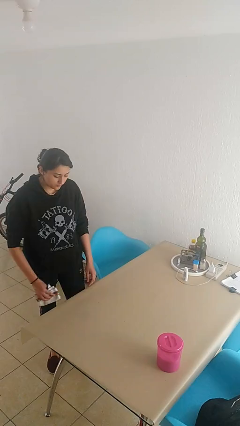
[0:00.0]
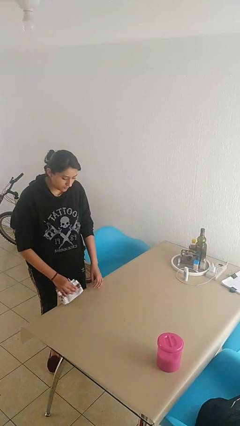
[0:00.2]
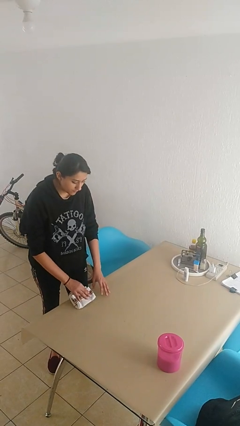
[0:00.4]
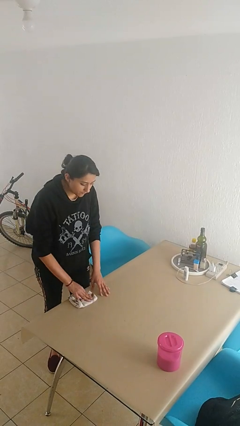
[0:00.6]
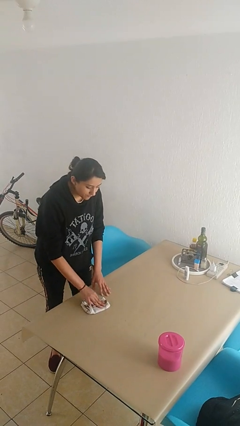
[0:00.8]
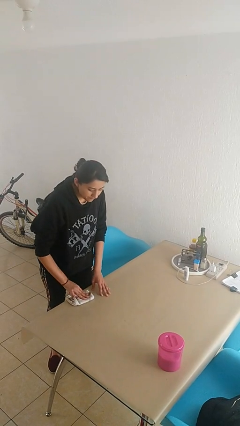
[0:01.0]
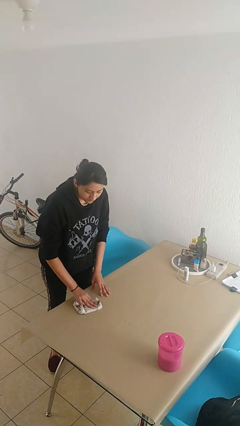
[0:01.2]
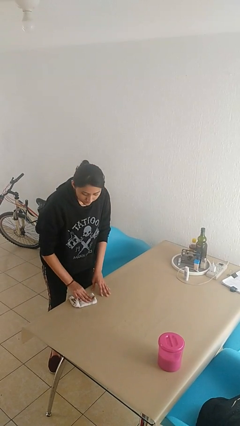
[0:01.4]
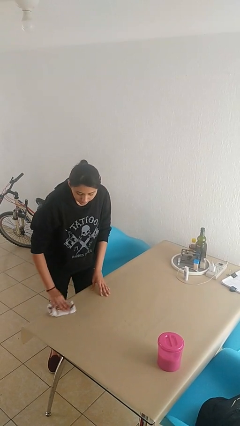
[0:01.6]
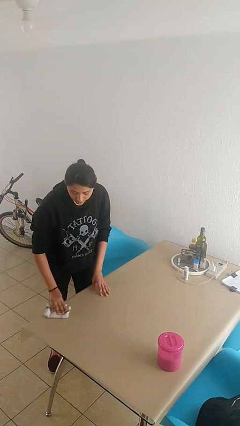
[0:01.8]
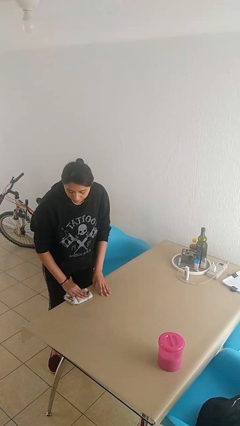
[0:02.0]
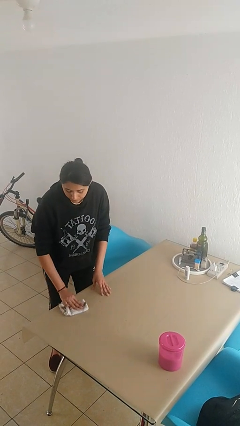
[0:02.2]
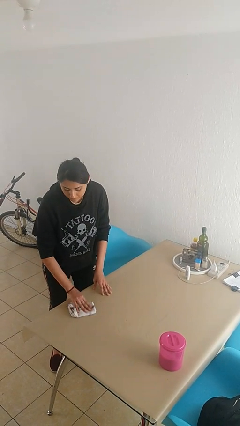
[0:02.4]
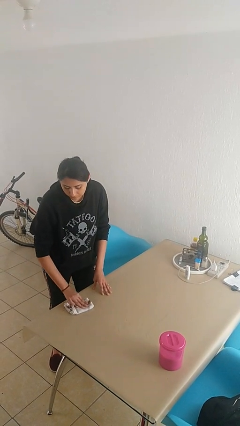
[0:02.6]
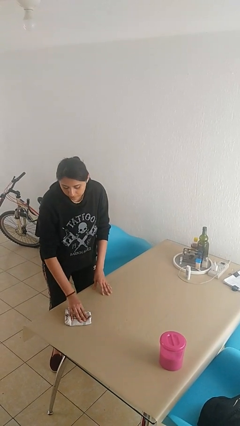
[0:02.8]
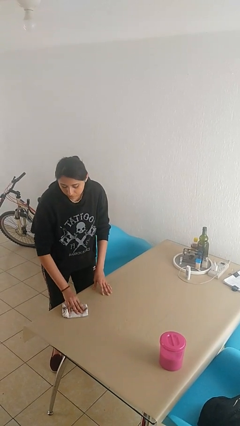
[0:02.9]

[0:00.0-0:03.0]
person cleans table with rag

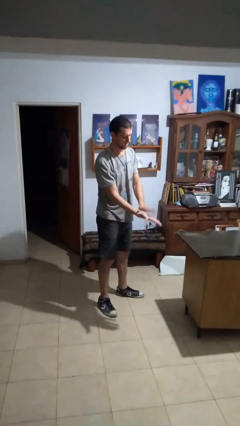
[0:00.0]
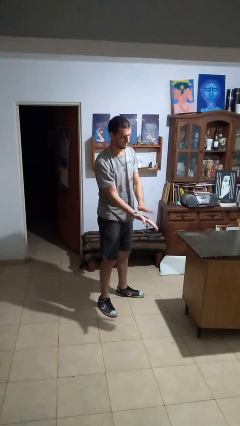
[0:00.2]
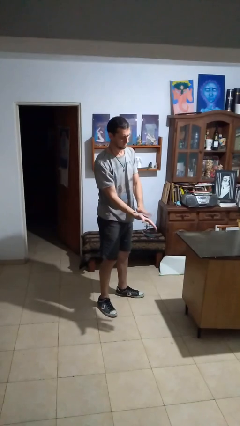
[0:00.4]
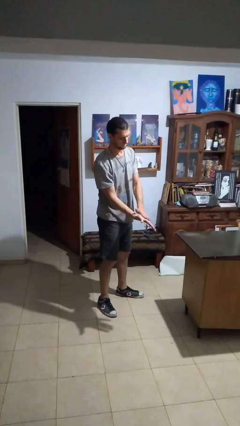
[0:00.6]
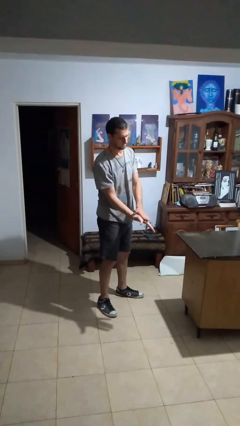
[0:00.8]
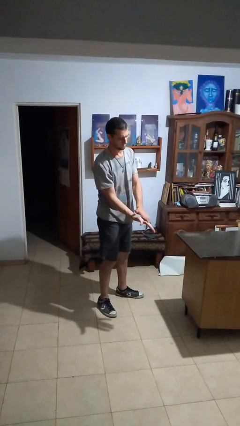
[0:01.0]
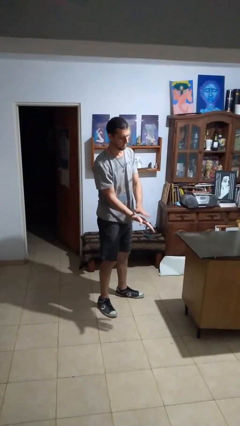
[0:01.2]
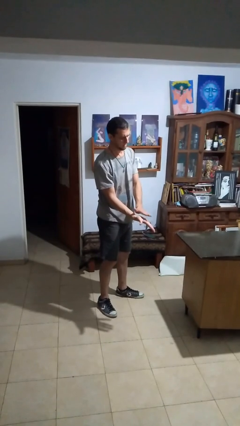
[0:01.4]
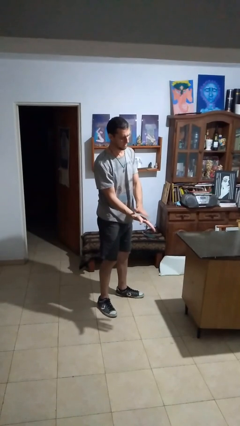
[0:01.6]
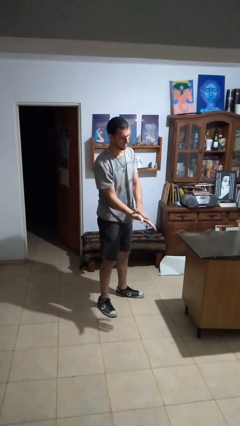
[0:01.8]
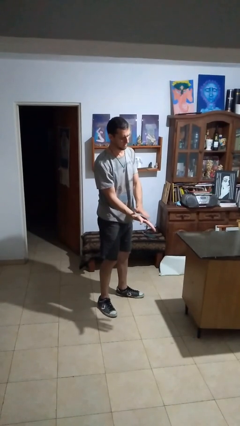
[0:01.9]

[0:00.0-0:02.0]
person claps hands

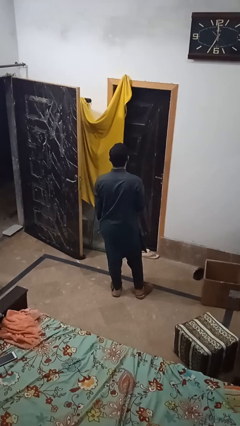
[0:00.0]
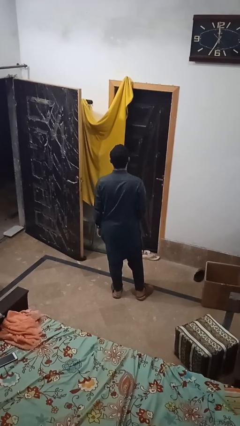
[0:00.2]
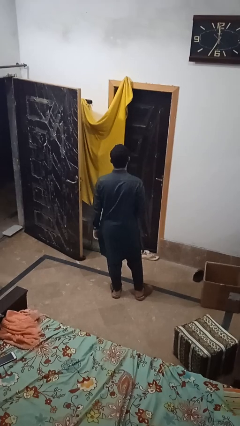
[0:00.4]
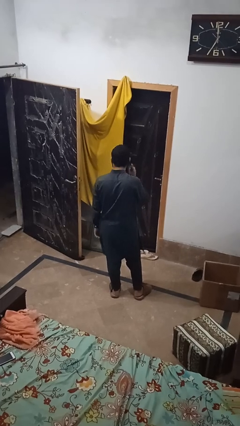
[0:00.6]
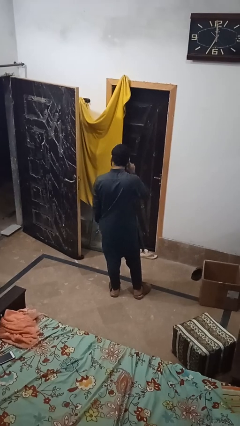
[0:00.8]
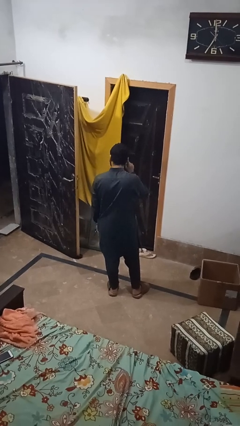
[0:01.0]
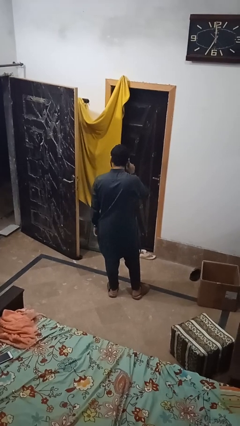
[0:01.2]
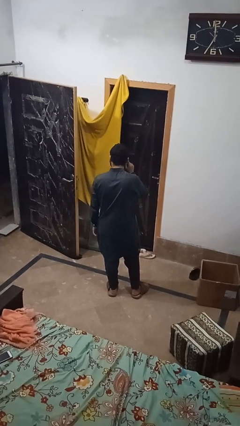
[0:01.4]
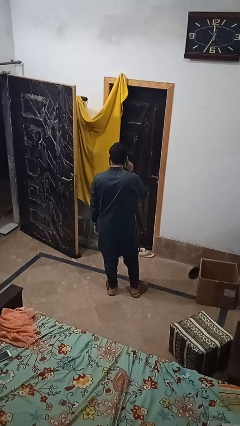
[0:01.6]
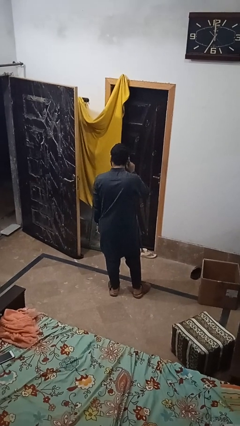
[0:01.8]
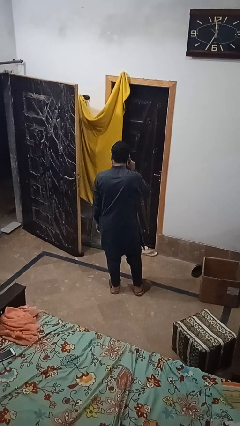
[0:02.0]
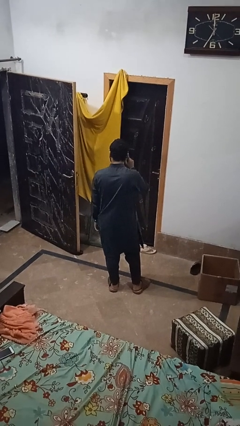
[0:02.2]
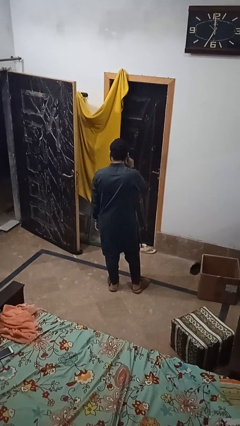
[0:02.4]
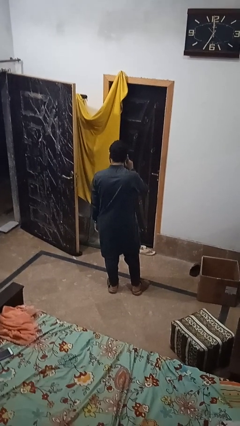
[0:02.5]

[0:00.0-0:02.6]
person gestures listen closely

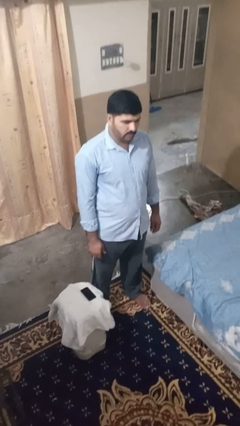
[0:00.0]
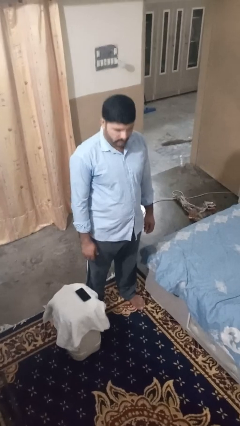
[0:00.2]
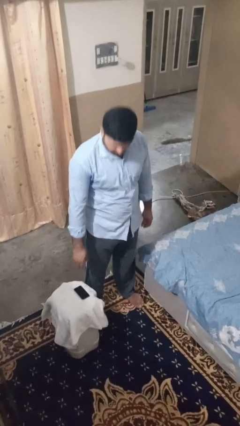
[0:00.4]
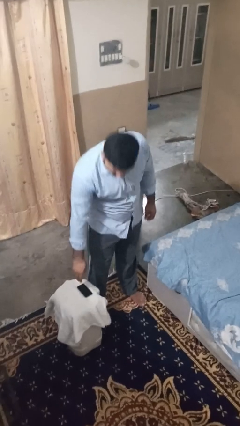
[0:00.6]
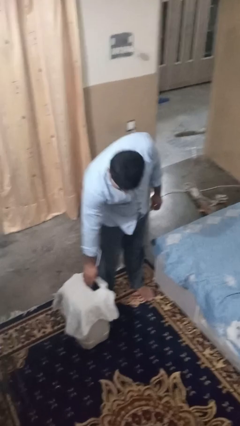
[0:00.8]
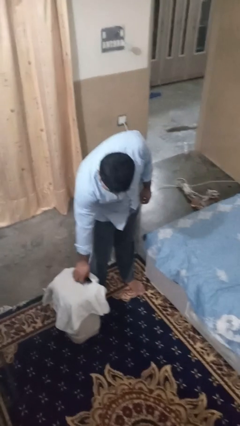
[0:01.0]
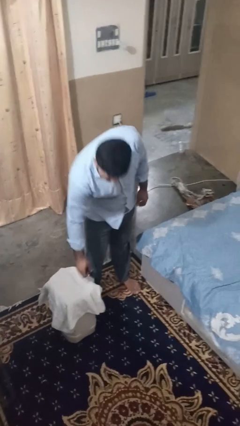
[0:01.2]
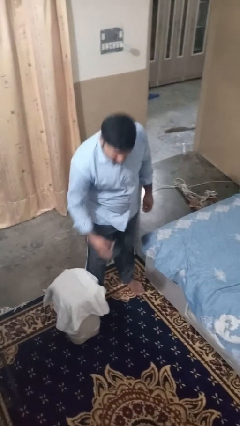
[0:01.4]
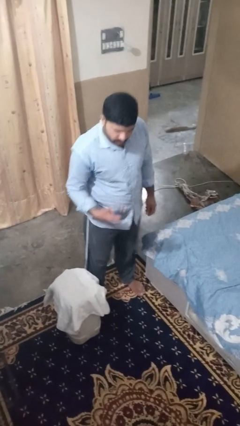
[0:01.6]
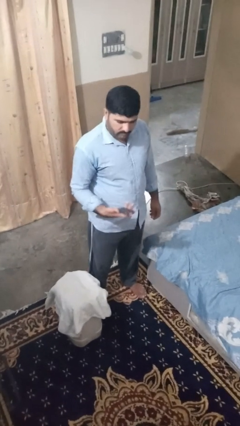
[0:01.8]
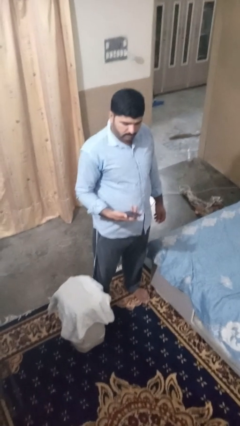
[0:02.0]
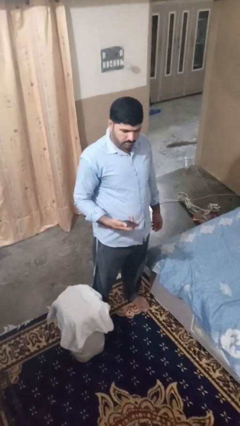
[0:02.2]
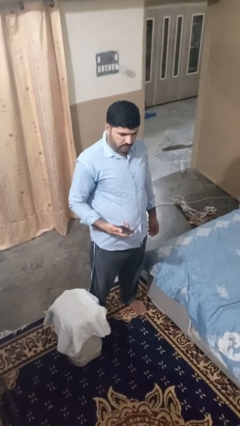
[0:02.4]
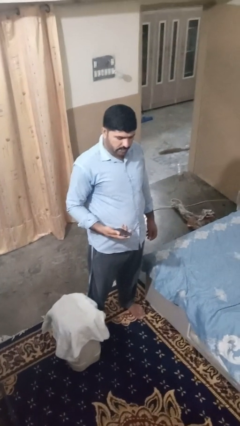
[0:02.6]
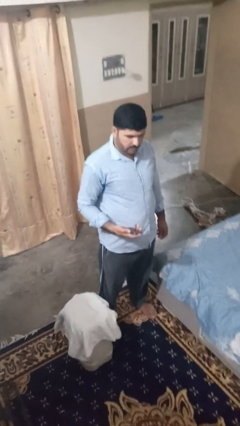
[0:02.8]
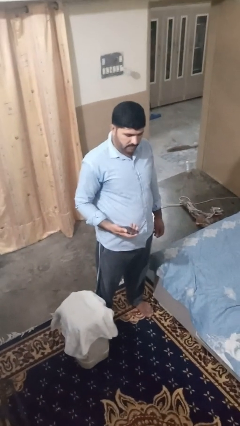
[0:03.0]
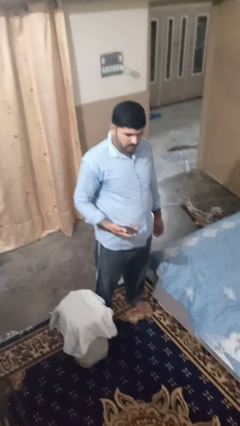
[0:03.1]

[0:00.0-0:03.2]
person takes phone from pocket

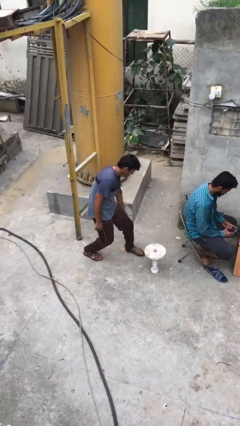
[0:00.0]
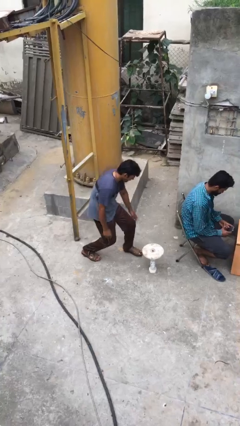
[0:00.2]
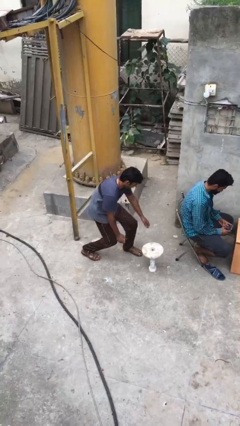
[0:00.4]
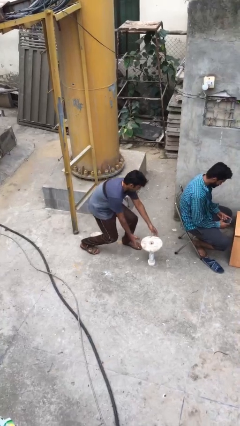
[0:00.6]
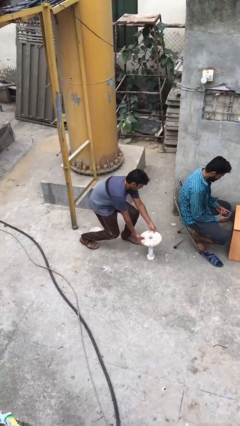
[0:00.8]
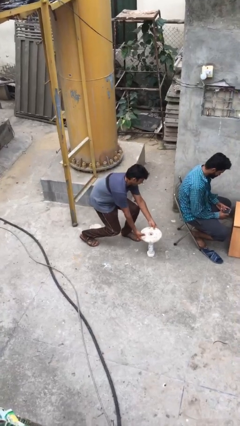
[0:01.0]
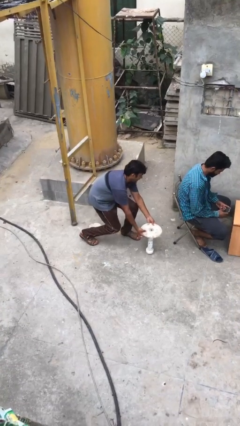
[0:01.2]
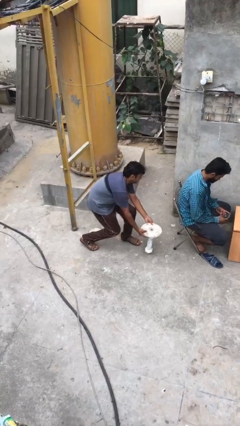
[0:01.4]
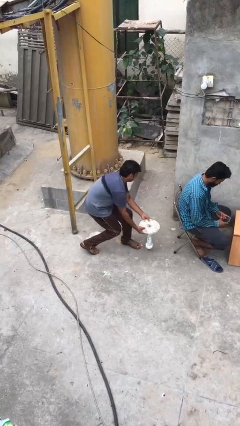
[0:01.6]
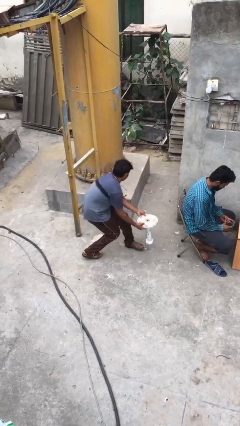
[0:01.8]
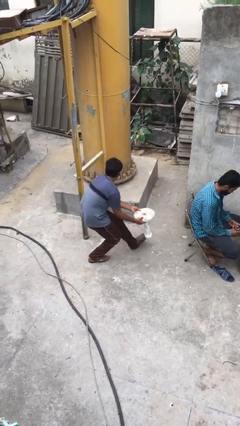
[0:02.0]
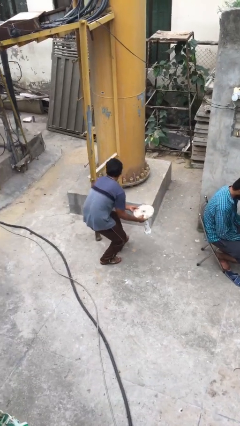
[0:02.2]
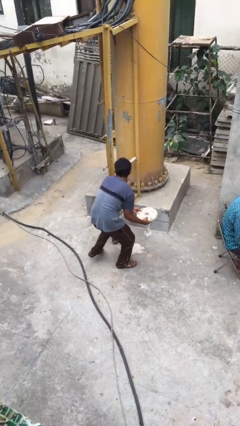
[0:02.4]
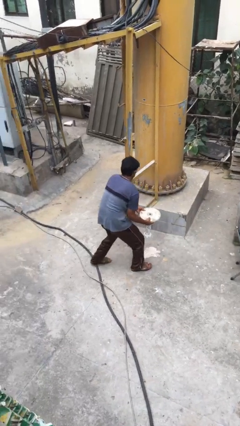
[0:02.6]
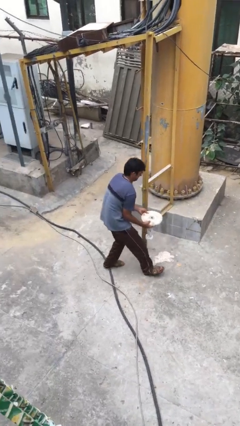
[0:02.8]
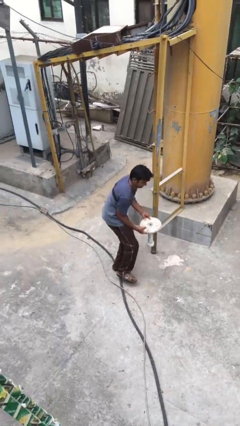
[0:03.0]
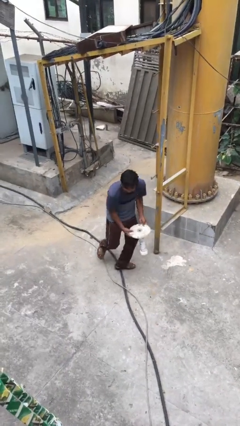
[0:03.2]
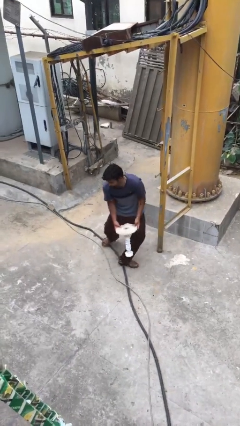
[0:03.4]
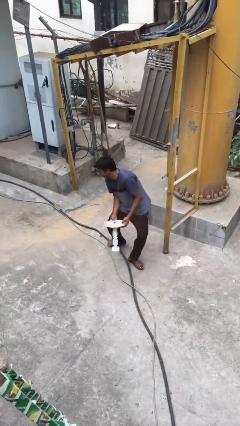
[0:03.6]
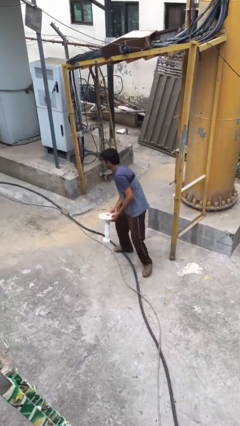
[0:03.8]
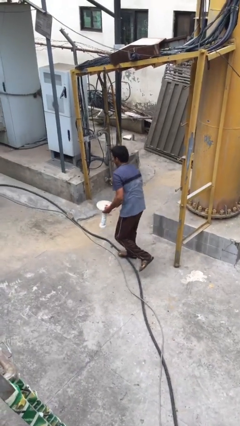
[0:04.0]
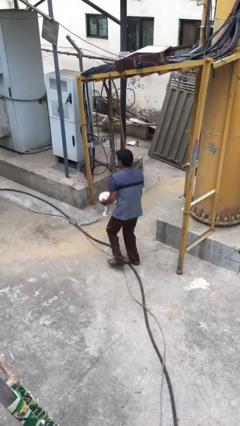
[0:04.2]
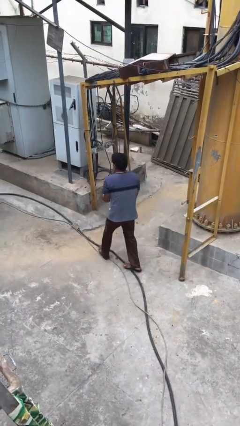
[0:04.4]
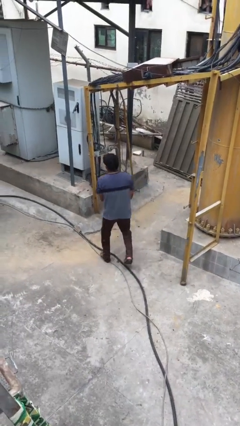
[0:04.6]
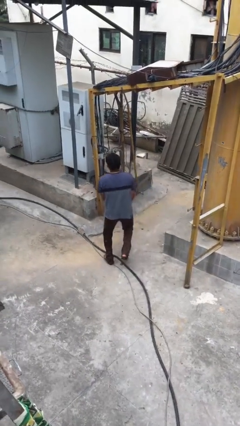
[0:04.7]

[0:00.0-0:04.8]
person steals object from person

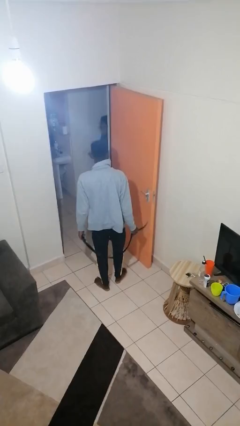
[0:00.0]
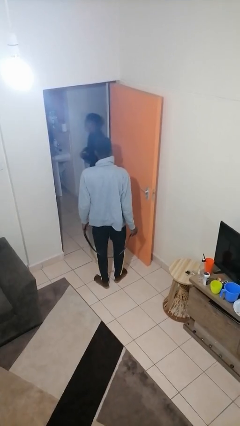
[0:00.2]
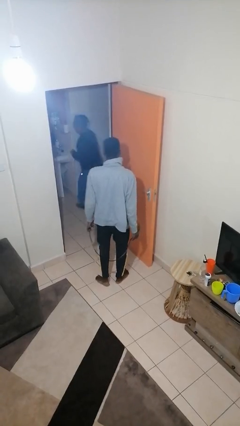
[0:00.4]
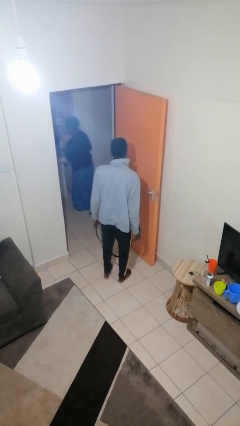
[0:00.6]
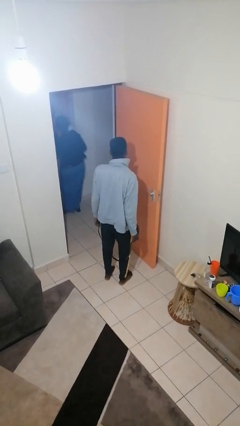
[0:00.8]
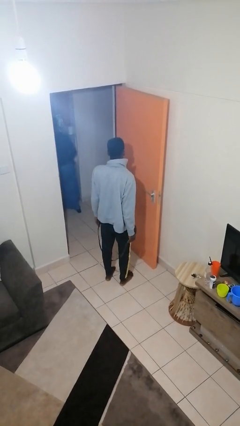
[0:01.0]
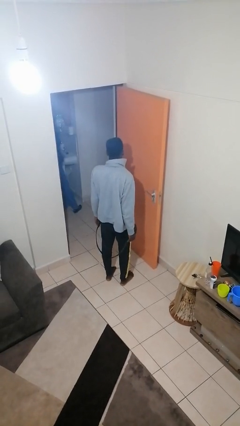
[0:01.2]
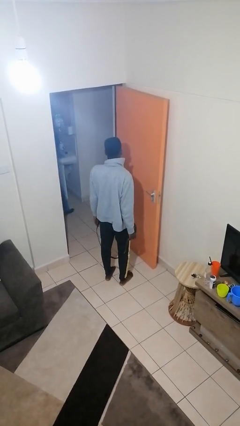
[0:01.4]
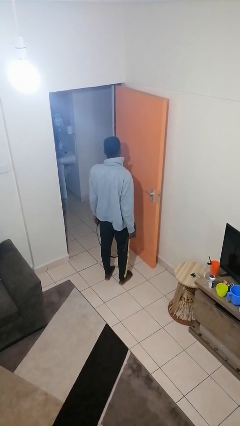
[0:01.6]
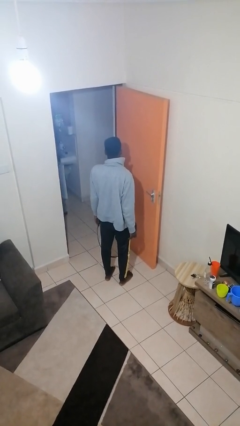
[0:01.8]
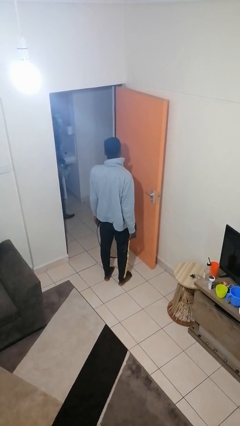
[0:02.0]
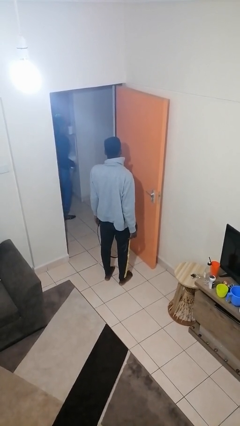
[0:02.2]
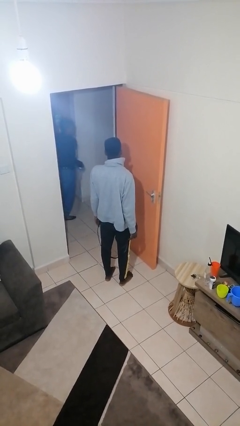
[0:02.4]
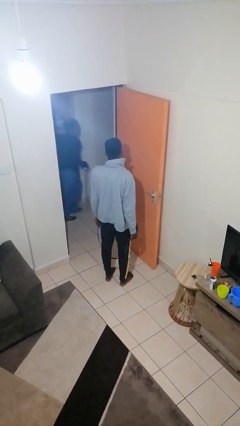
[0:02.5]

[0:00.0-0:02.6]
person takes off belt
